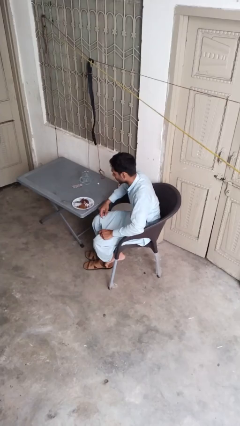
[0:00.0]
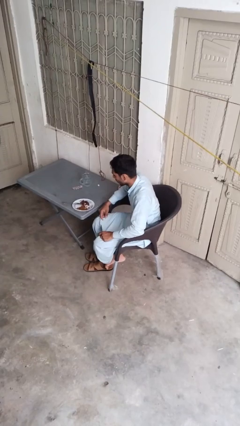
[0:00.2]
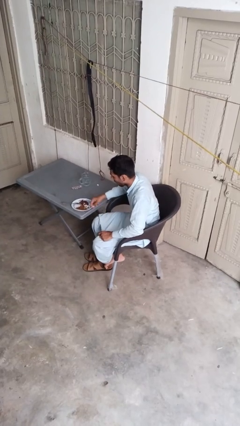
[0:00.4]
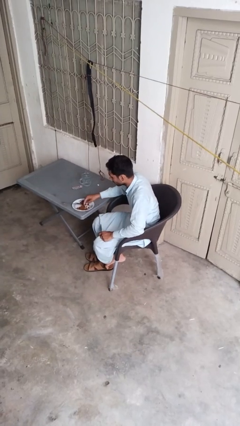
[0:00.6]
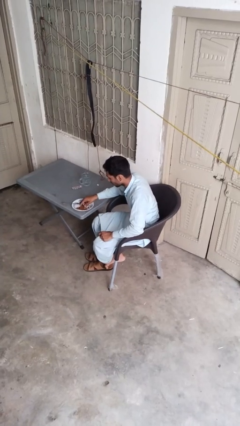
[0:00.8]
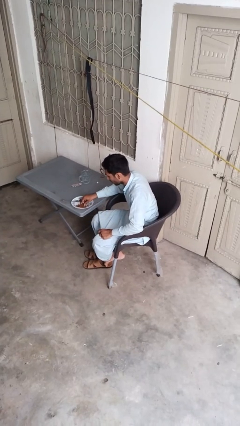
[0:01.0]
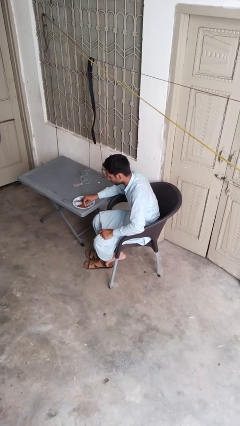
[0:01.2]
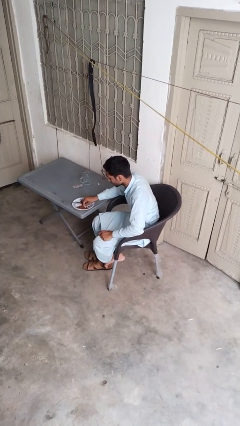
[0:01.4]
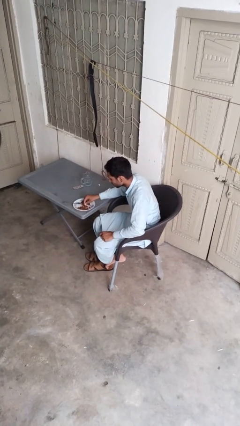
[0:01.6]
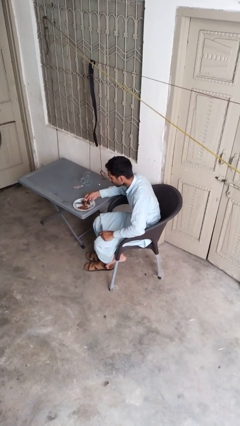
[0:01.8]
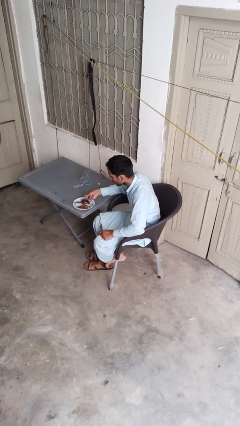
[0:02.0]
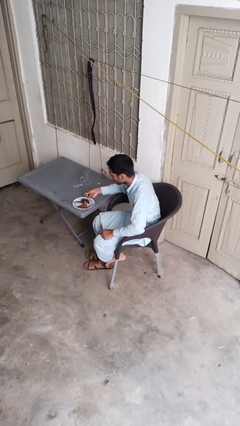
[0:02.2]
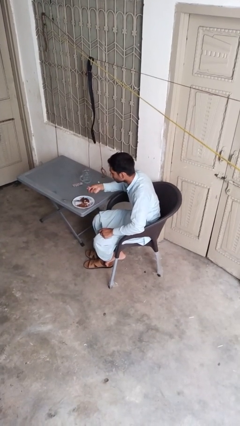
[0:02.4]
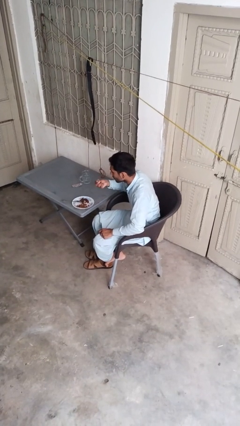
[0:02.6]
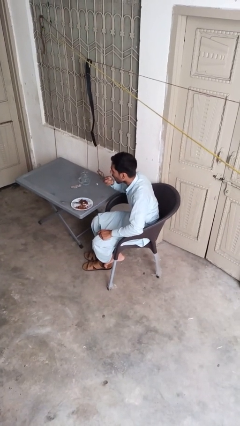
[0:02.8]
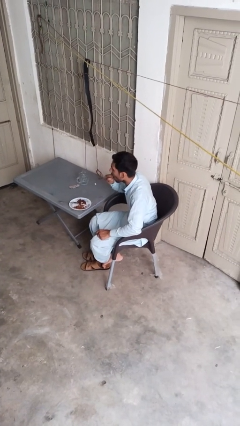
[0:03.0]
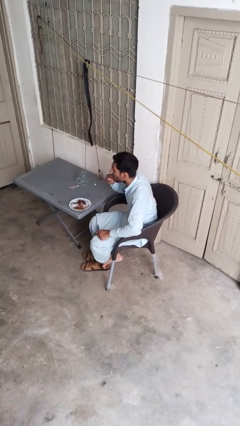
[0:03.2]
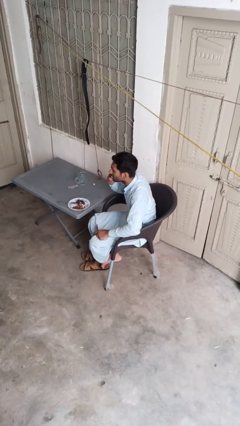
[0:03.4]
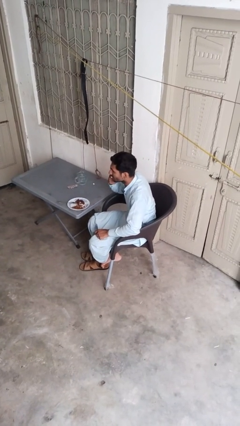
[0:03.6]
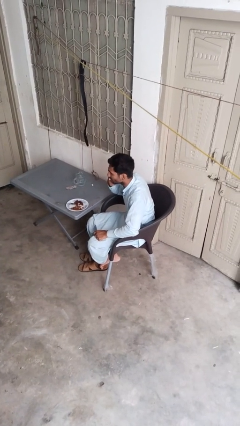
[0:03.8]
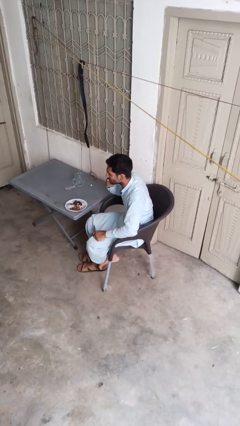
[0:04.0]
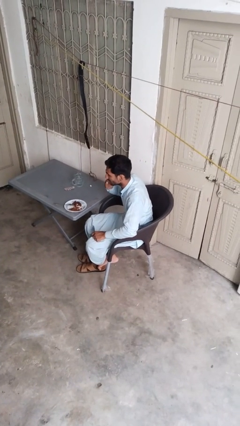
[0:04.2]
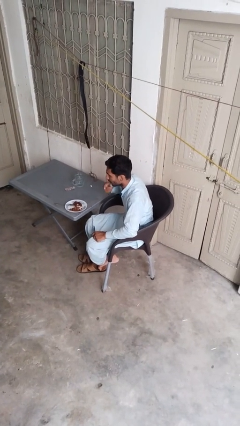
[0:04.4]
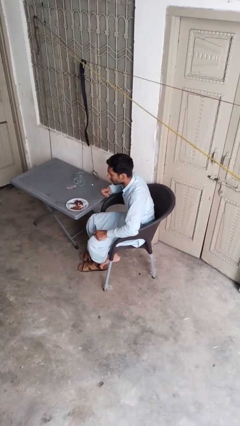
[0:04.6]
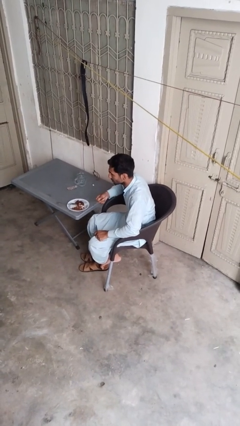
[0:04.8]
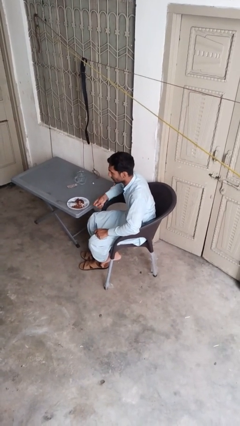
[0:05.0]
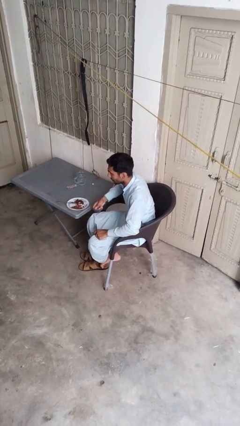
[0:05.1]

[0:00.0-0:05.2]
person eats with hands

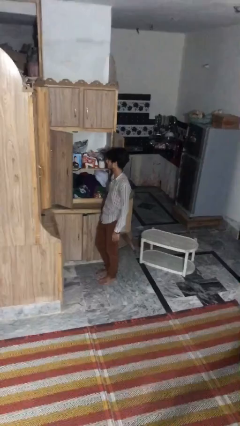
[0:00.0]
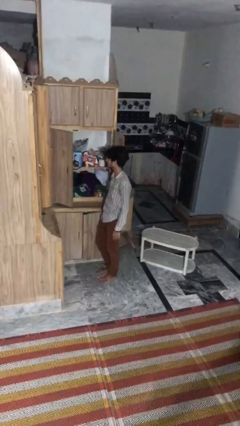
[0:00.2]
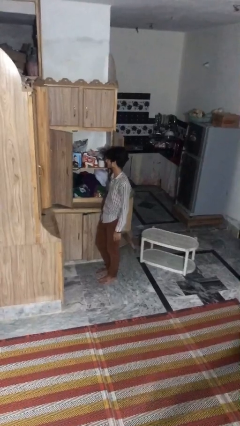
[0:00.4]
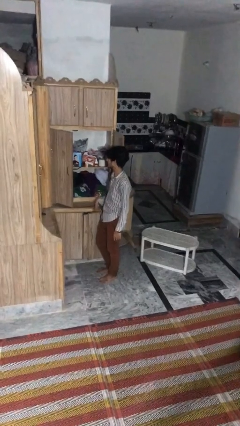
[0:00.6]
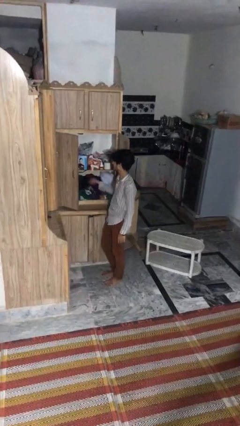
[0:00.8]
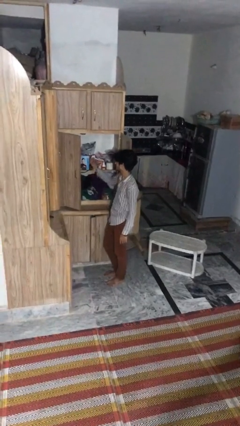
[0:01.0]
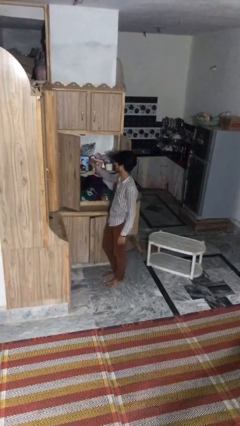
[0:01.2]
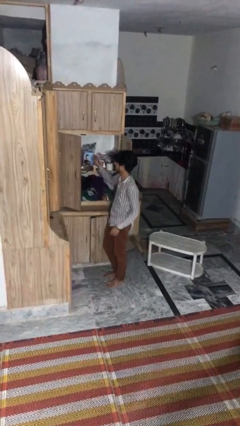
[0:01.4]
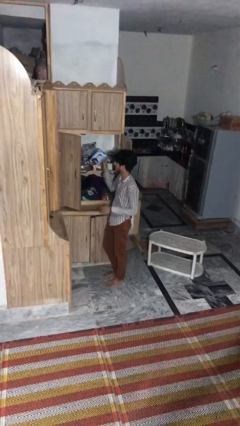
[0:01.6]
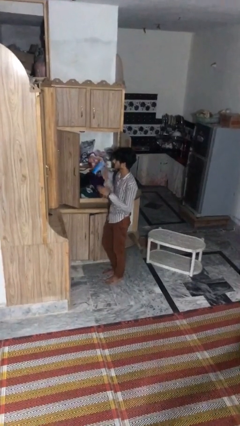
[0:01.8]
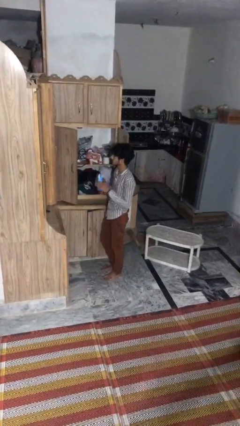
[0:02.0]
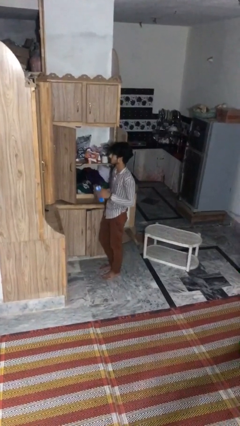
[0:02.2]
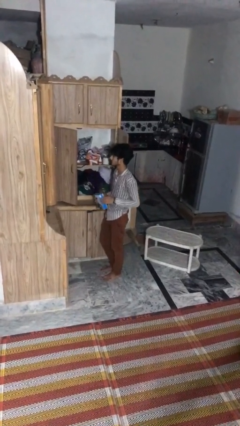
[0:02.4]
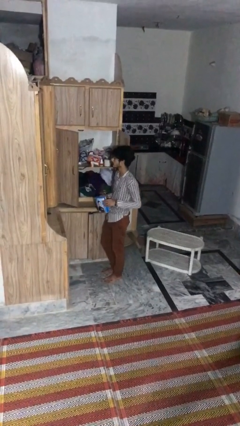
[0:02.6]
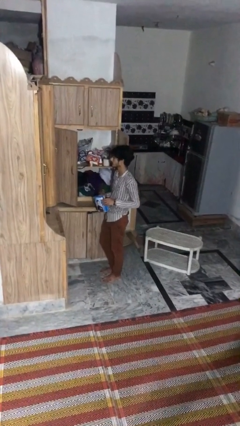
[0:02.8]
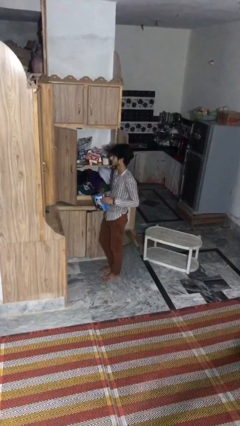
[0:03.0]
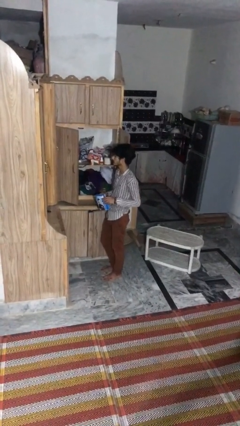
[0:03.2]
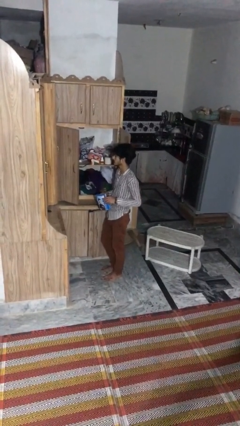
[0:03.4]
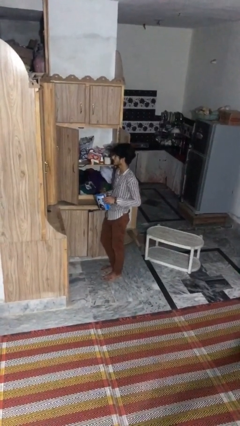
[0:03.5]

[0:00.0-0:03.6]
person picks up object from cabinet

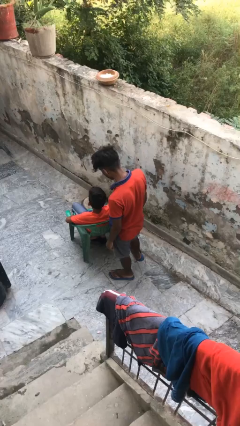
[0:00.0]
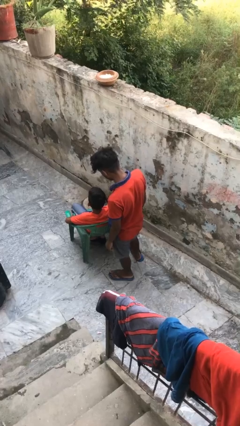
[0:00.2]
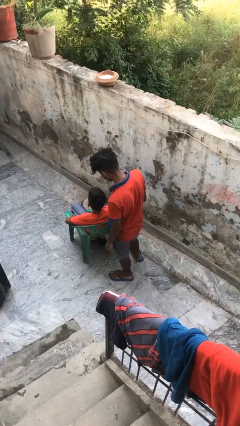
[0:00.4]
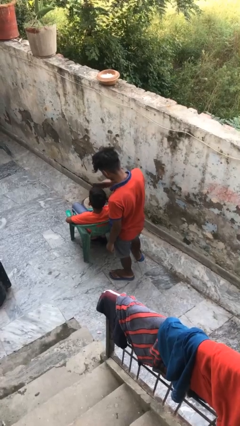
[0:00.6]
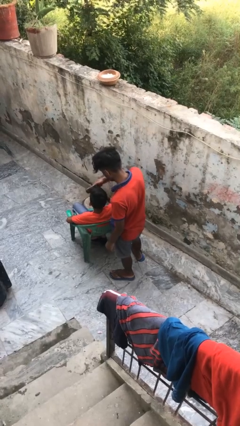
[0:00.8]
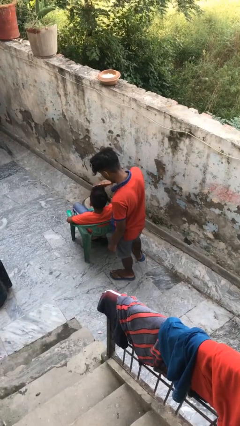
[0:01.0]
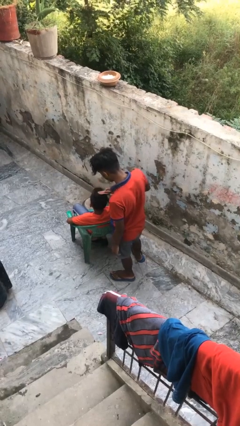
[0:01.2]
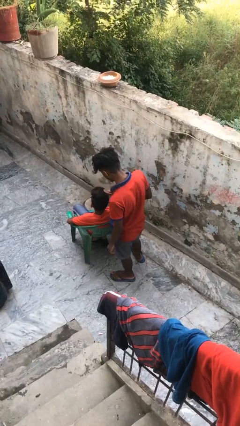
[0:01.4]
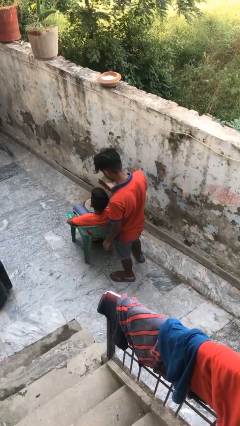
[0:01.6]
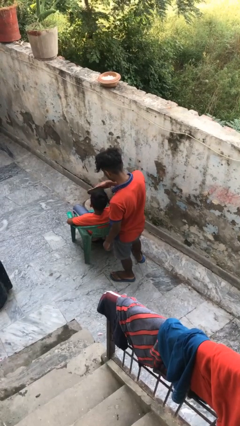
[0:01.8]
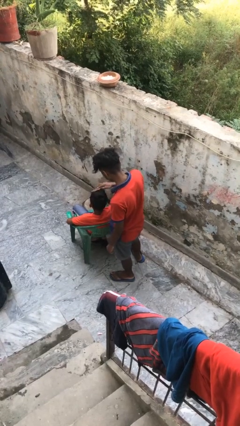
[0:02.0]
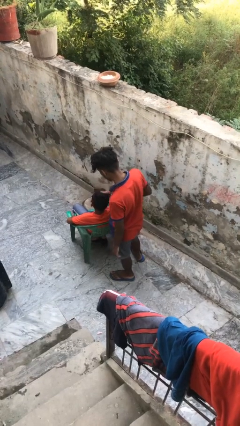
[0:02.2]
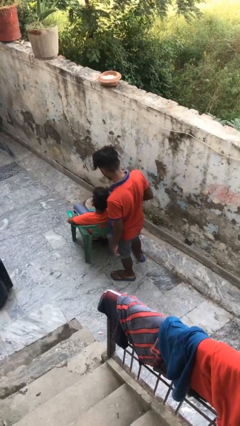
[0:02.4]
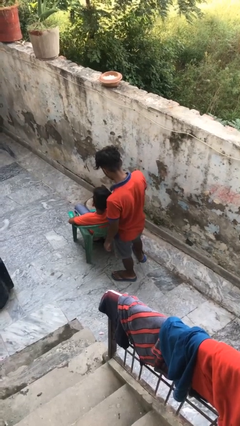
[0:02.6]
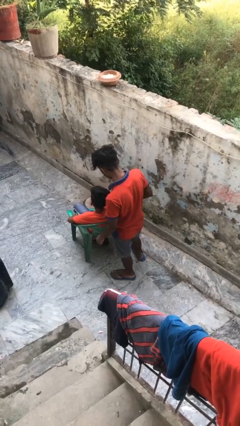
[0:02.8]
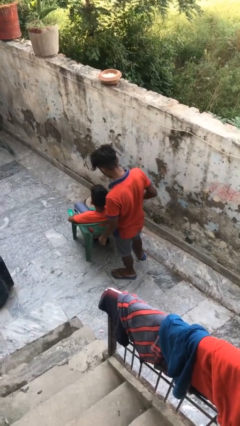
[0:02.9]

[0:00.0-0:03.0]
person brushes hair of person

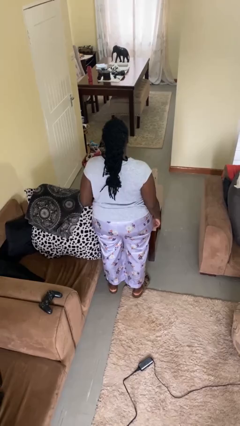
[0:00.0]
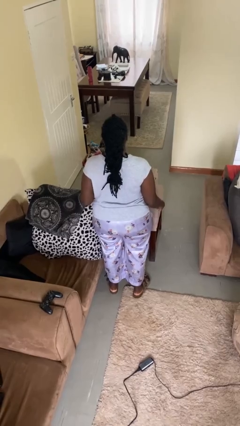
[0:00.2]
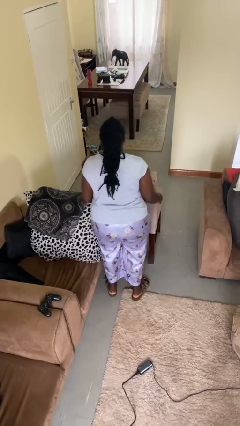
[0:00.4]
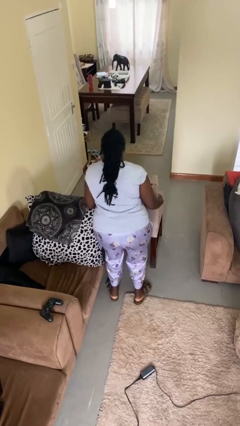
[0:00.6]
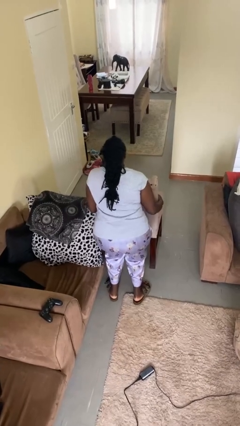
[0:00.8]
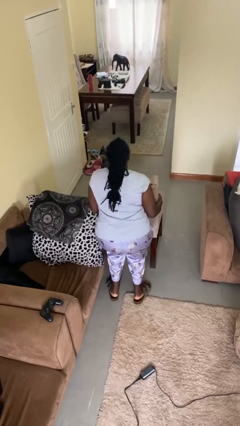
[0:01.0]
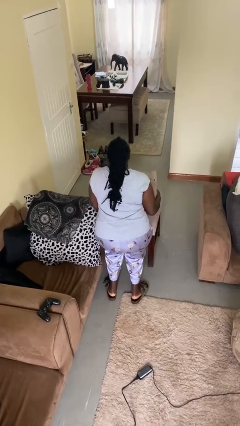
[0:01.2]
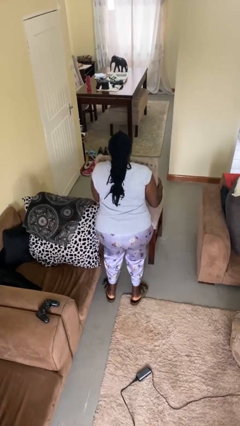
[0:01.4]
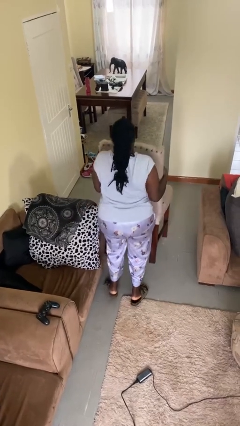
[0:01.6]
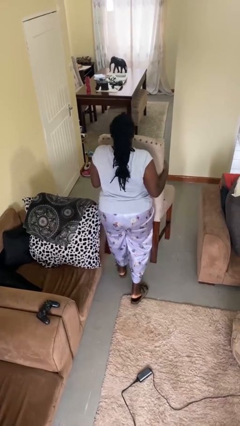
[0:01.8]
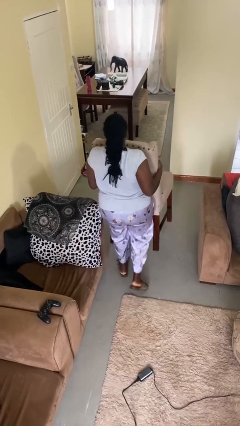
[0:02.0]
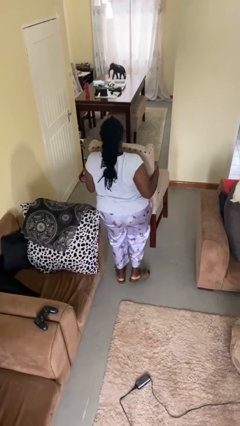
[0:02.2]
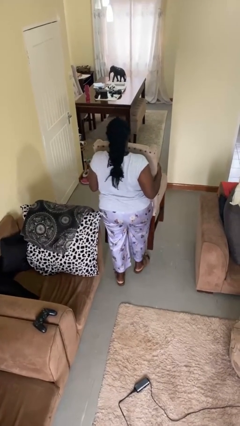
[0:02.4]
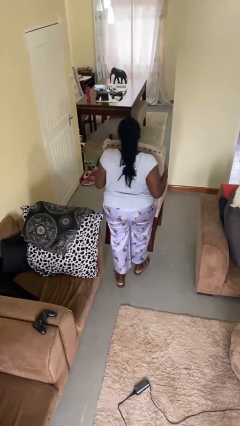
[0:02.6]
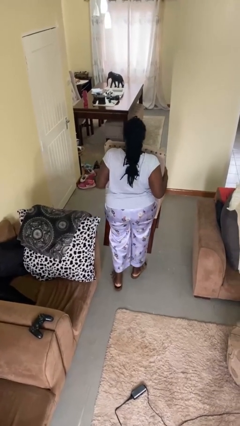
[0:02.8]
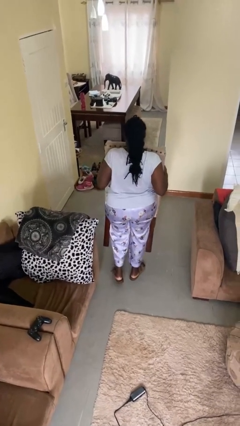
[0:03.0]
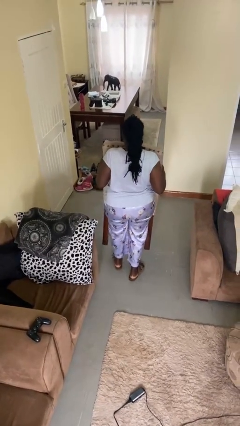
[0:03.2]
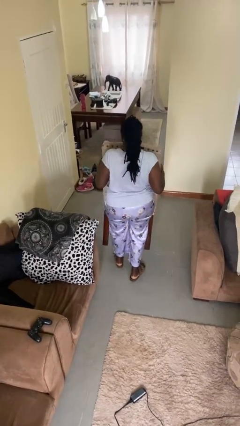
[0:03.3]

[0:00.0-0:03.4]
person carries furniture

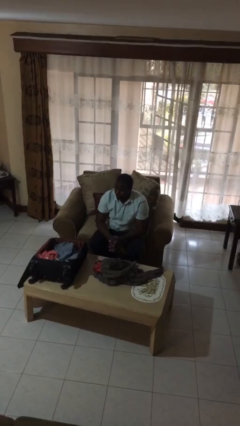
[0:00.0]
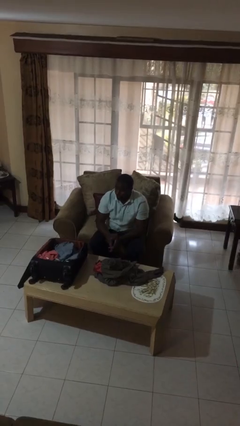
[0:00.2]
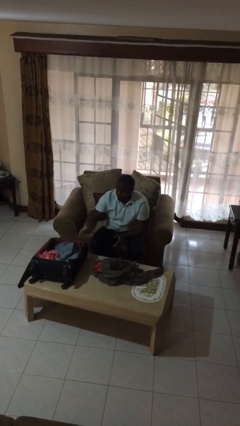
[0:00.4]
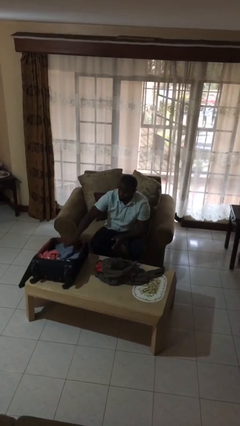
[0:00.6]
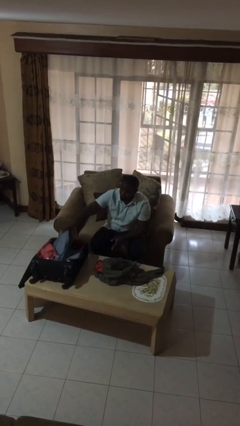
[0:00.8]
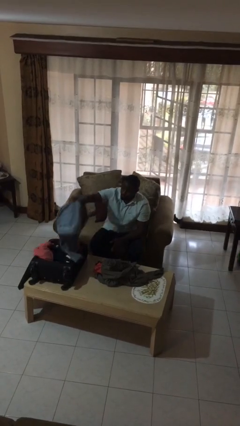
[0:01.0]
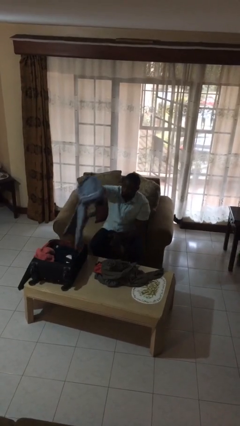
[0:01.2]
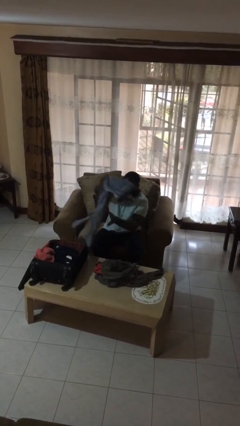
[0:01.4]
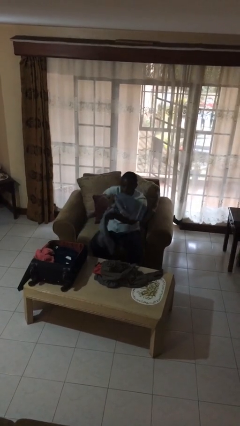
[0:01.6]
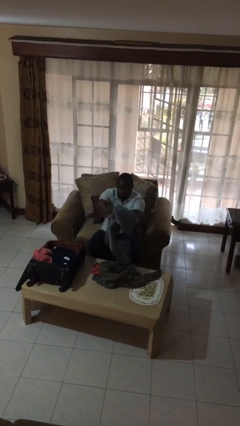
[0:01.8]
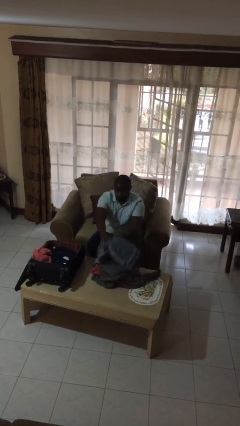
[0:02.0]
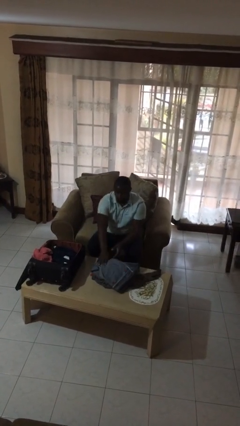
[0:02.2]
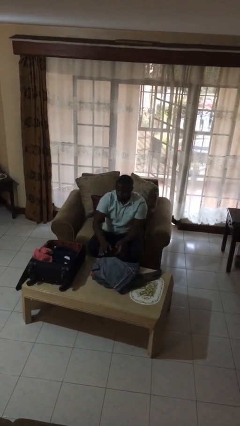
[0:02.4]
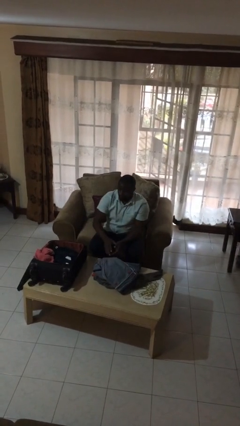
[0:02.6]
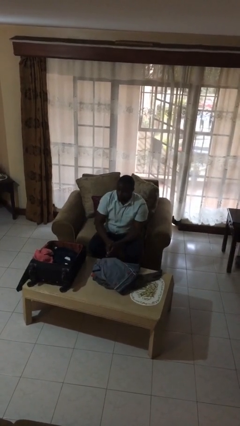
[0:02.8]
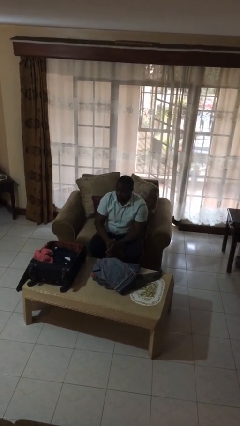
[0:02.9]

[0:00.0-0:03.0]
person unloads clothes from suitcase
